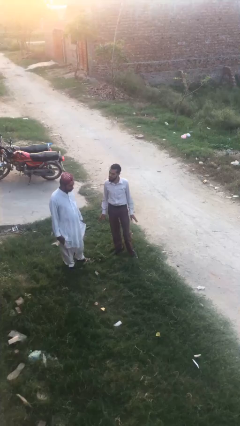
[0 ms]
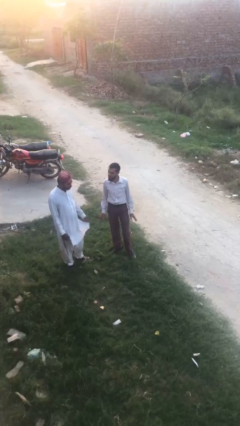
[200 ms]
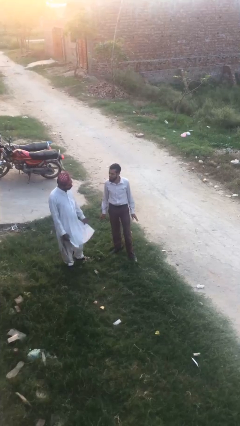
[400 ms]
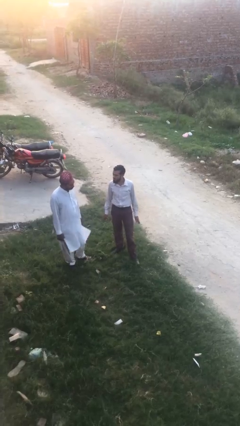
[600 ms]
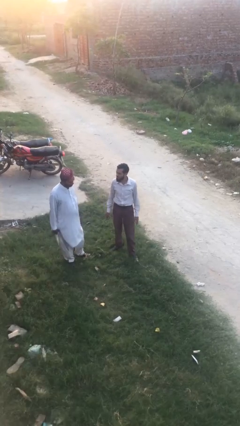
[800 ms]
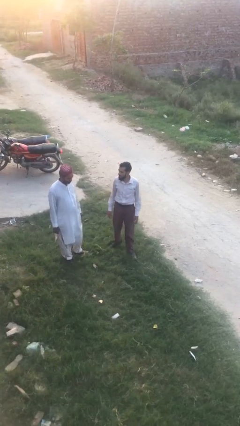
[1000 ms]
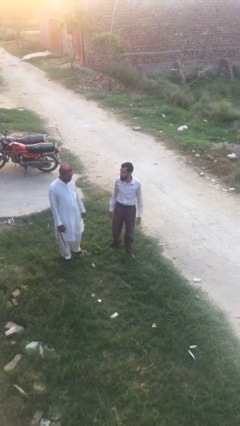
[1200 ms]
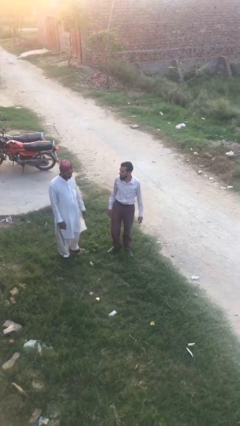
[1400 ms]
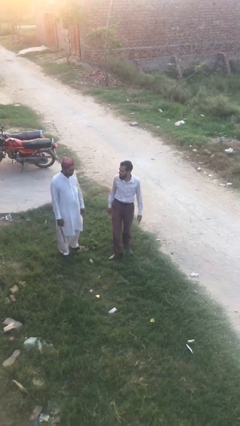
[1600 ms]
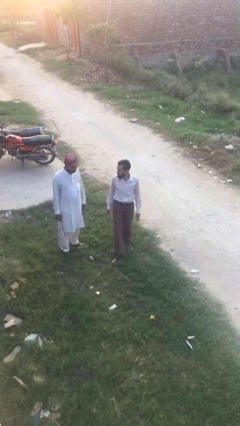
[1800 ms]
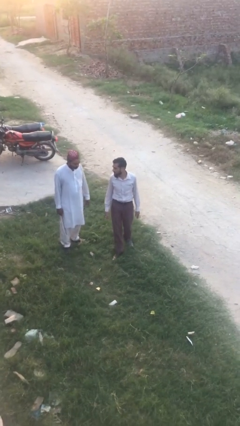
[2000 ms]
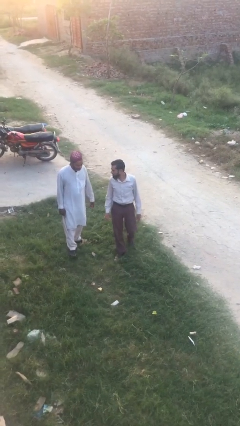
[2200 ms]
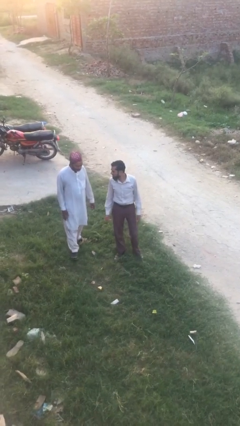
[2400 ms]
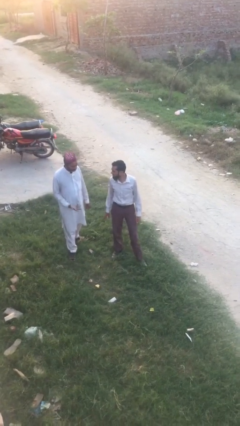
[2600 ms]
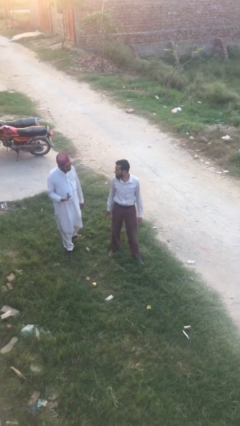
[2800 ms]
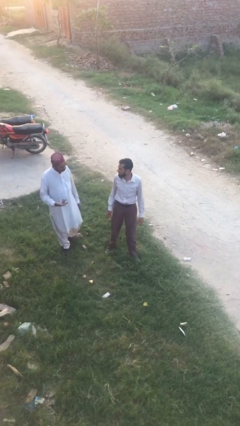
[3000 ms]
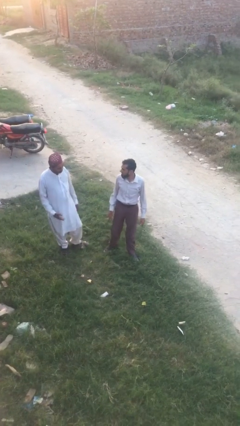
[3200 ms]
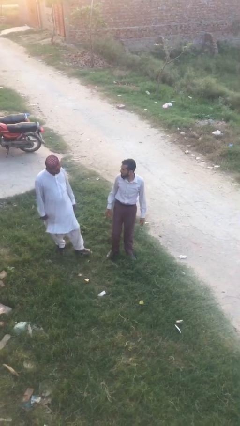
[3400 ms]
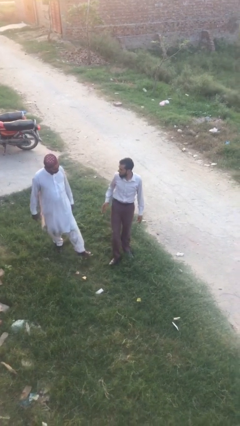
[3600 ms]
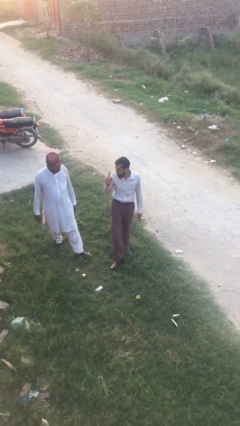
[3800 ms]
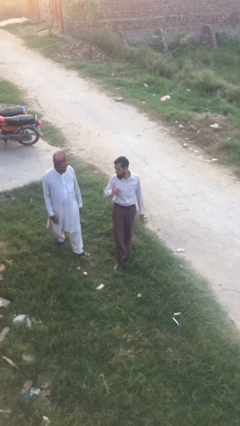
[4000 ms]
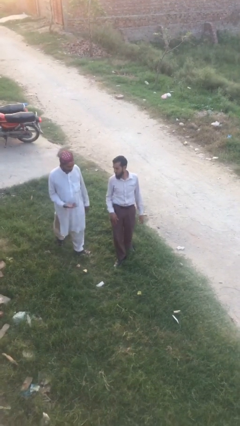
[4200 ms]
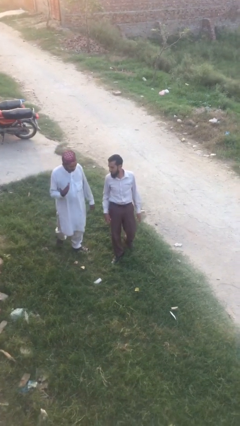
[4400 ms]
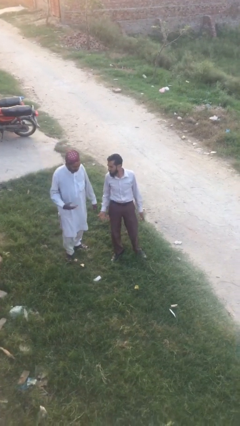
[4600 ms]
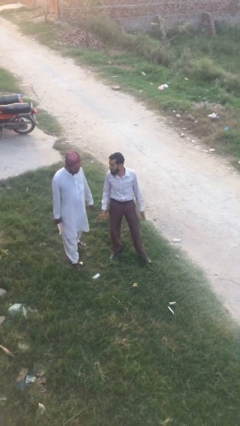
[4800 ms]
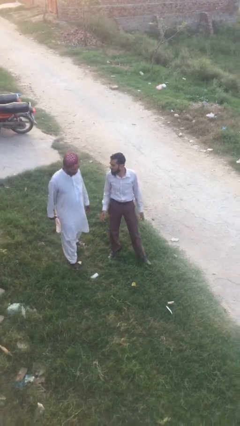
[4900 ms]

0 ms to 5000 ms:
person talks to person

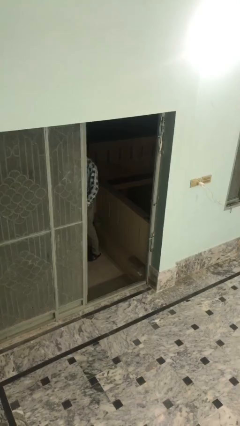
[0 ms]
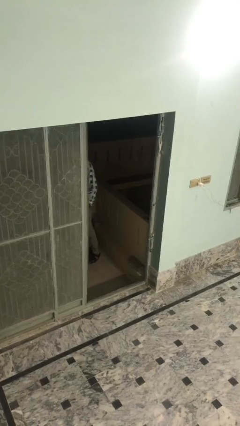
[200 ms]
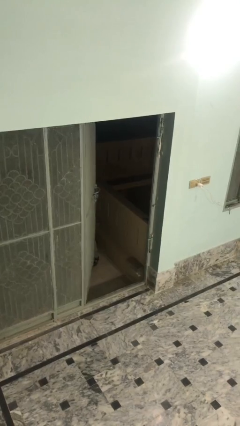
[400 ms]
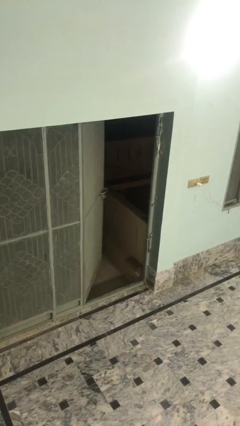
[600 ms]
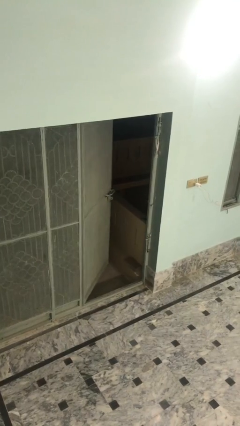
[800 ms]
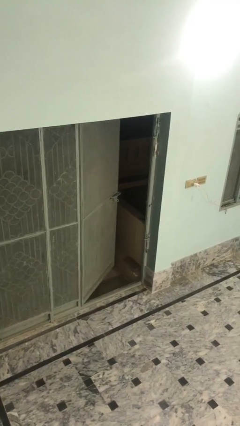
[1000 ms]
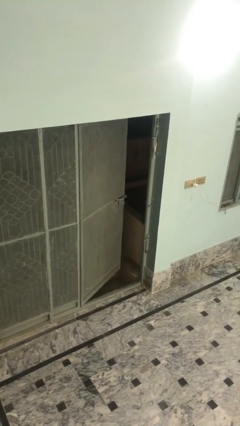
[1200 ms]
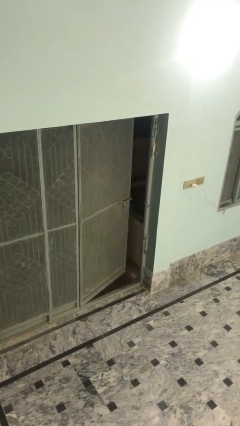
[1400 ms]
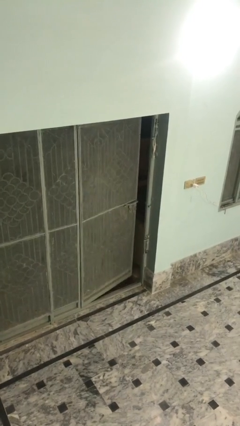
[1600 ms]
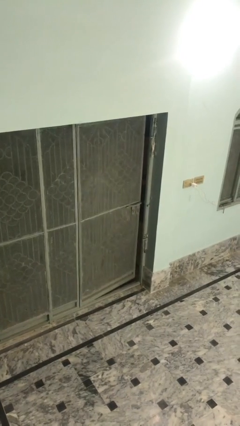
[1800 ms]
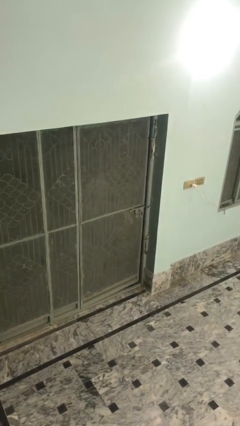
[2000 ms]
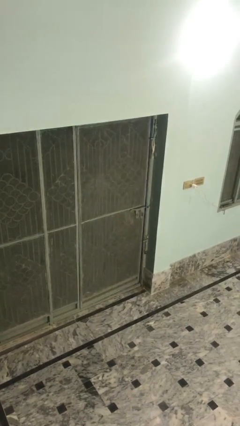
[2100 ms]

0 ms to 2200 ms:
person closes facility door

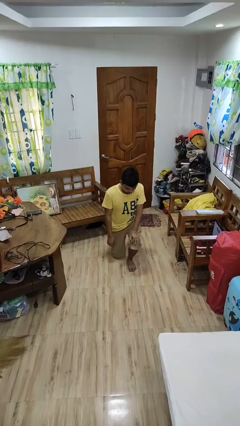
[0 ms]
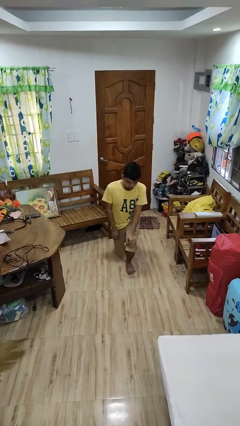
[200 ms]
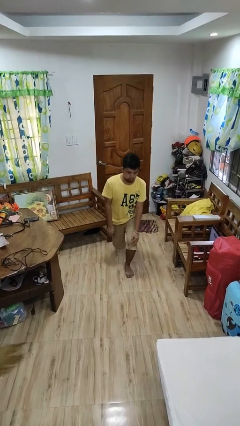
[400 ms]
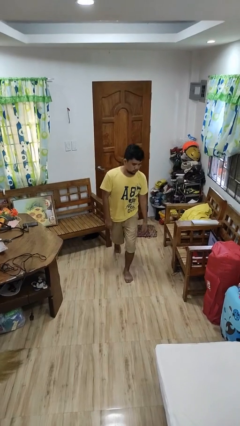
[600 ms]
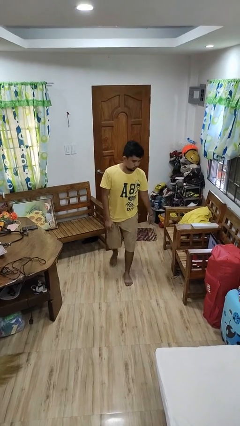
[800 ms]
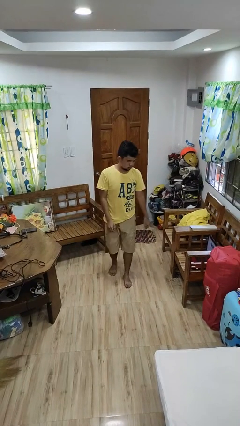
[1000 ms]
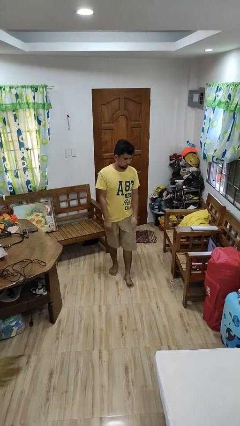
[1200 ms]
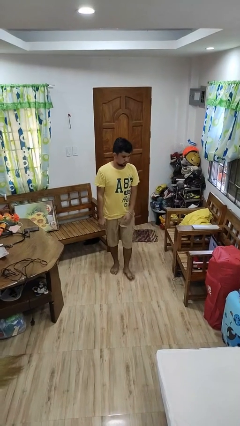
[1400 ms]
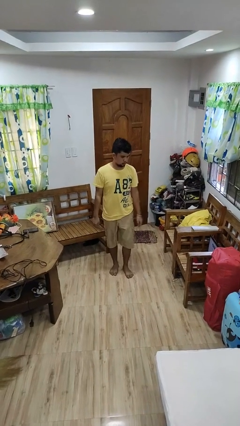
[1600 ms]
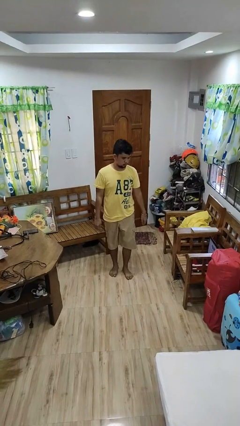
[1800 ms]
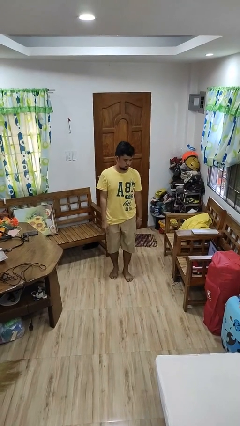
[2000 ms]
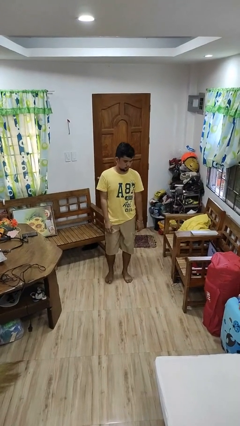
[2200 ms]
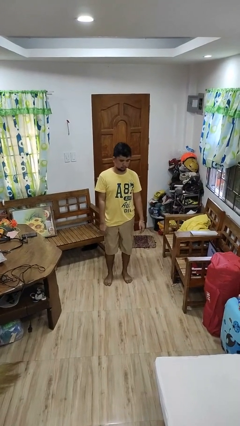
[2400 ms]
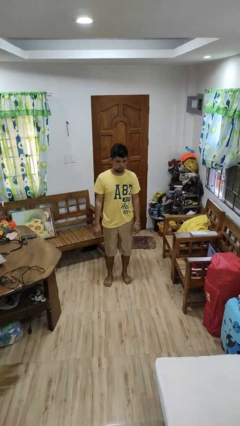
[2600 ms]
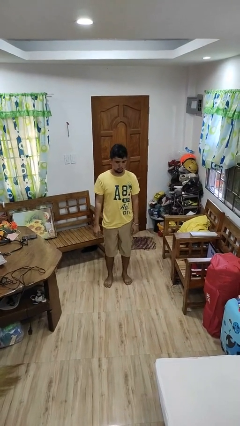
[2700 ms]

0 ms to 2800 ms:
person stands up from floor

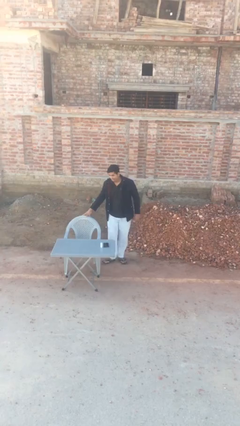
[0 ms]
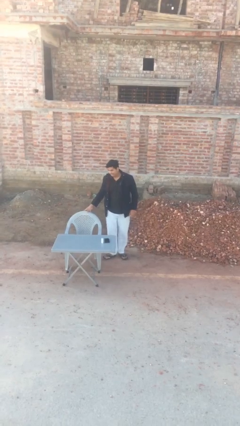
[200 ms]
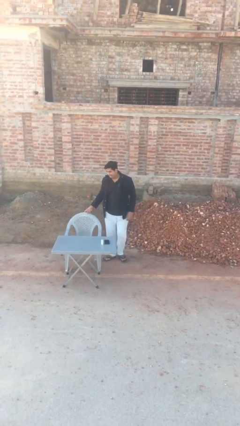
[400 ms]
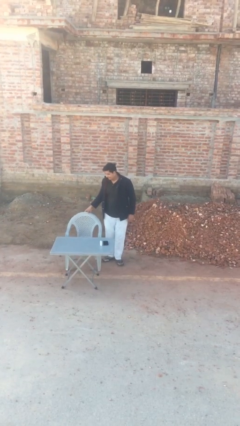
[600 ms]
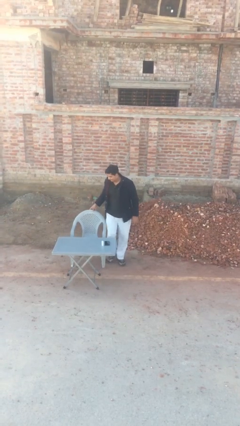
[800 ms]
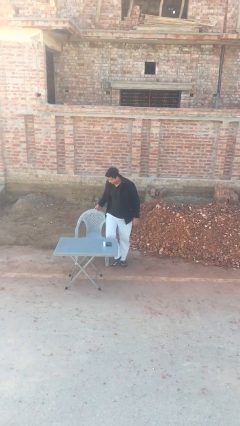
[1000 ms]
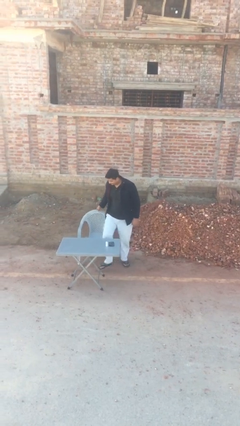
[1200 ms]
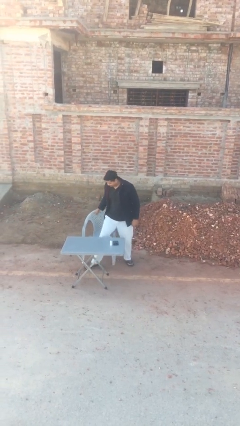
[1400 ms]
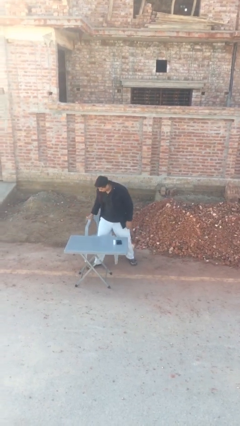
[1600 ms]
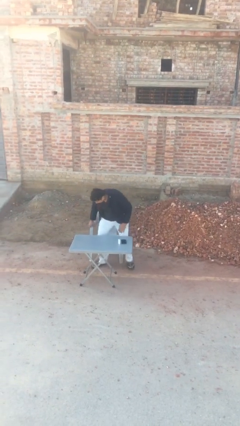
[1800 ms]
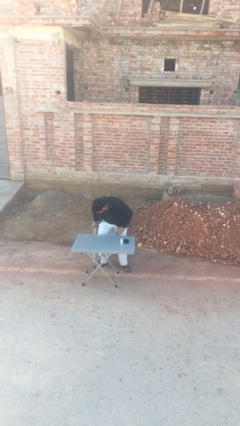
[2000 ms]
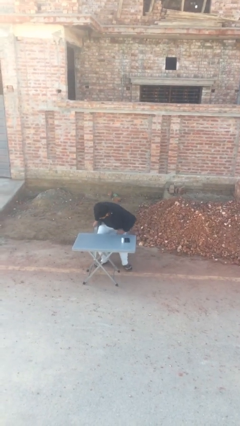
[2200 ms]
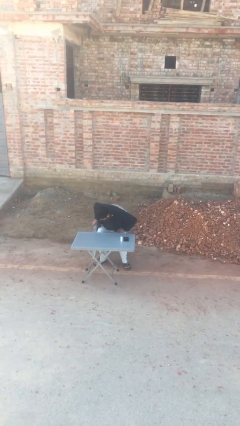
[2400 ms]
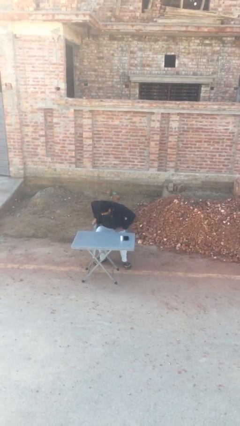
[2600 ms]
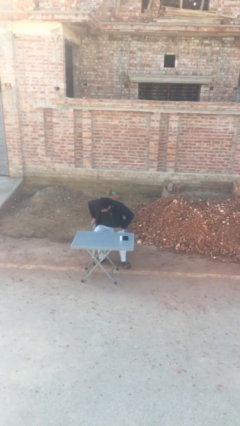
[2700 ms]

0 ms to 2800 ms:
person sits down

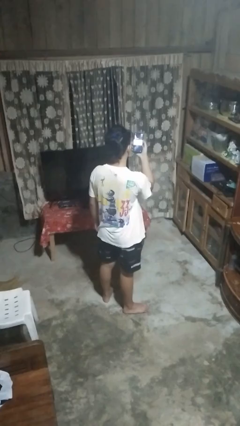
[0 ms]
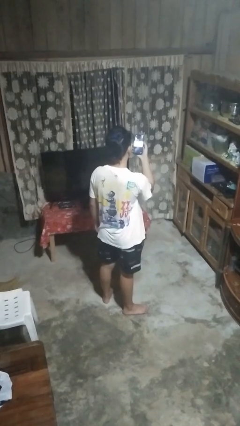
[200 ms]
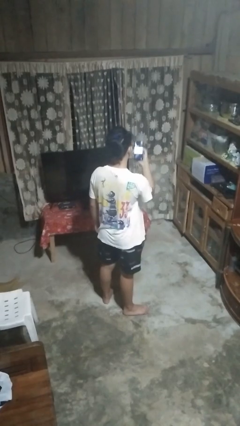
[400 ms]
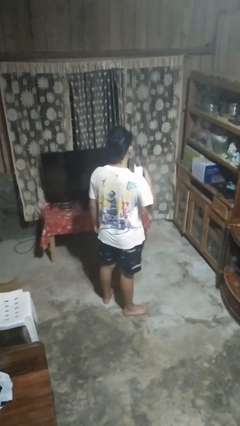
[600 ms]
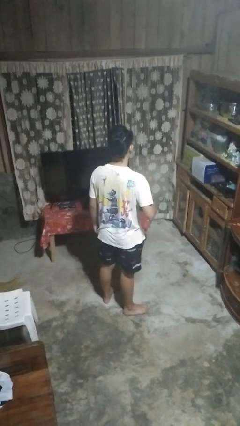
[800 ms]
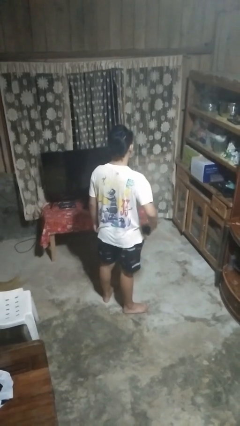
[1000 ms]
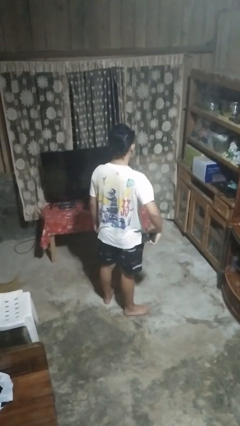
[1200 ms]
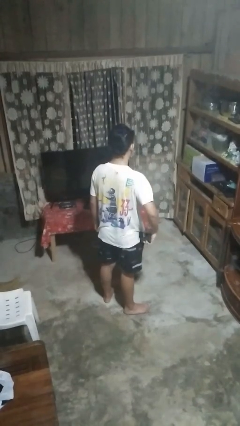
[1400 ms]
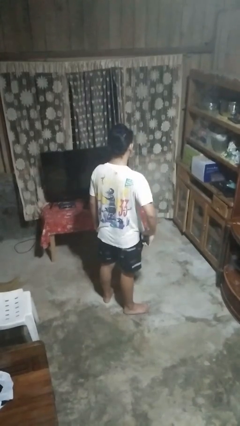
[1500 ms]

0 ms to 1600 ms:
person puts phone into pocket

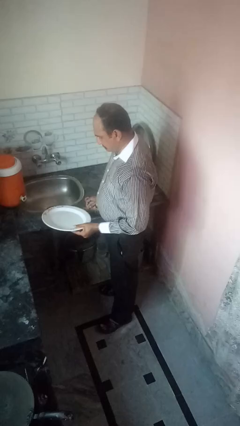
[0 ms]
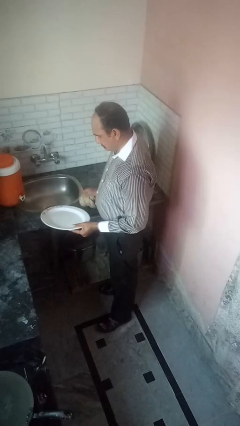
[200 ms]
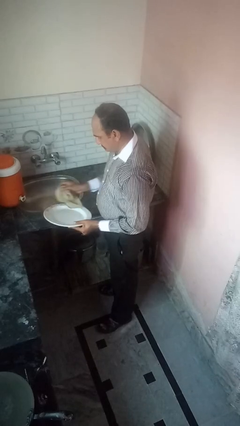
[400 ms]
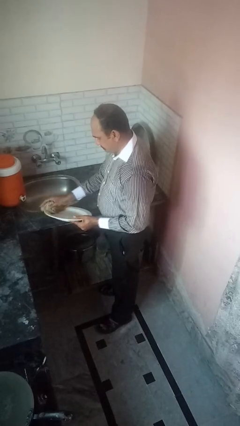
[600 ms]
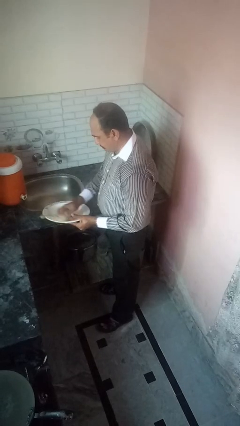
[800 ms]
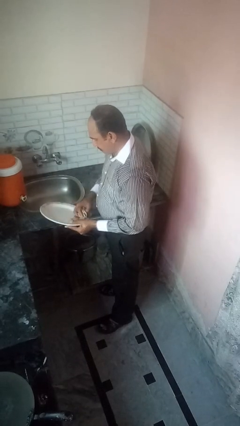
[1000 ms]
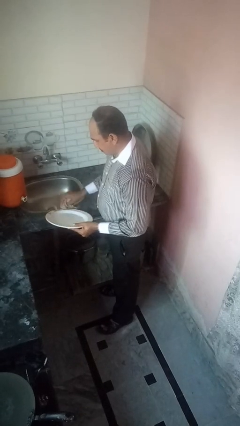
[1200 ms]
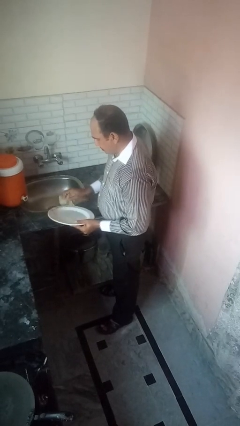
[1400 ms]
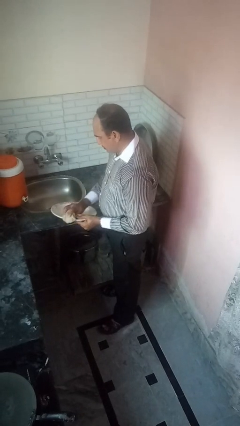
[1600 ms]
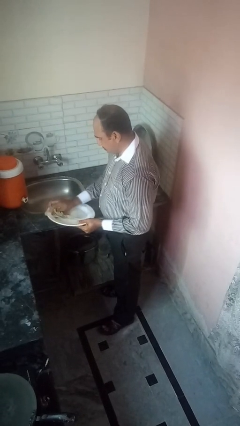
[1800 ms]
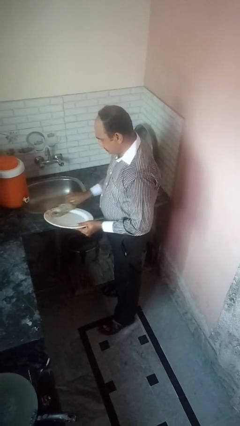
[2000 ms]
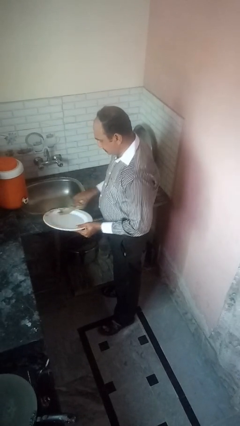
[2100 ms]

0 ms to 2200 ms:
person dries dish

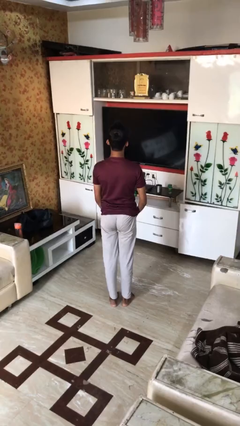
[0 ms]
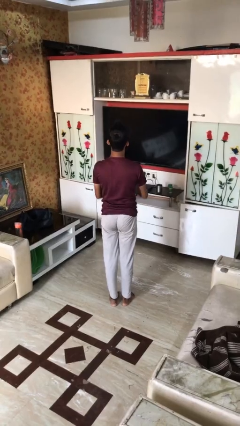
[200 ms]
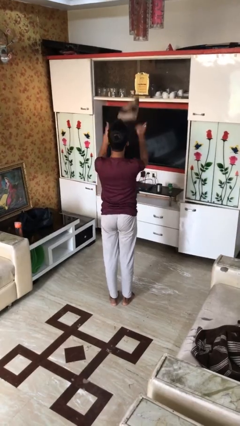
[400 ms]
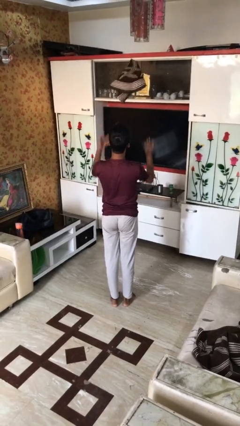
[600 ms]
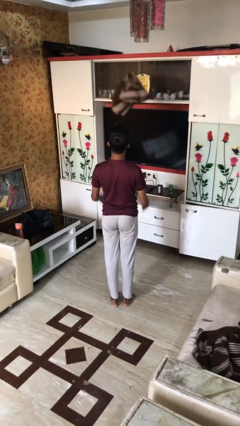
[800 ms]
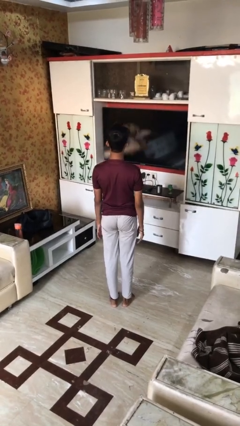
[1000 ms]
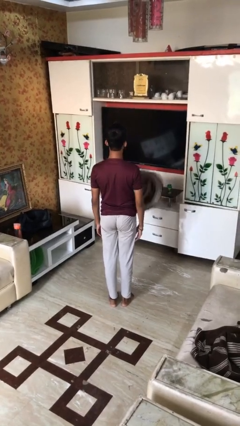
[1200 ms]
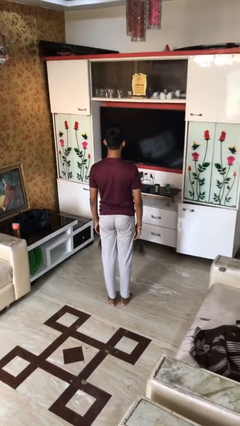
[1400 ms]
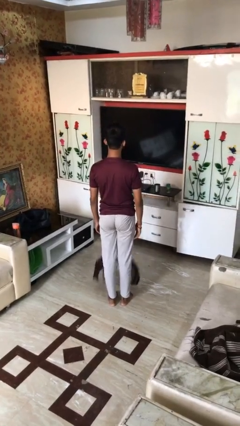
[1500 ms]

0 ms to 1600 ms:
person throws object into air
